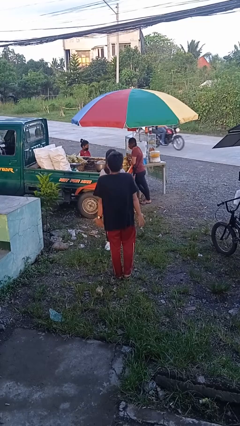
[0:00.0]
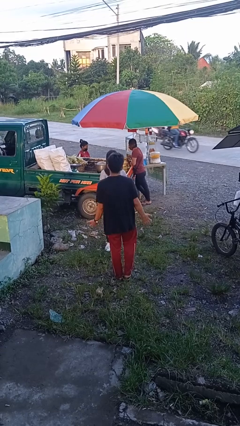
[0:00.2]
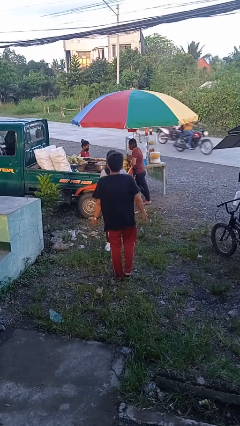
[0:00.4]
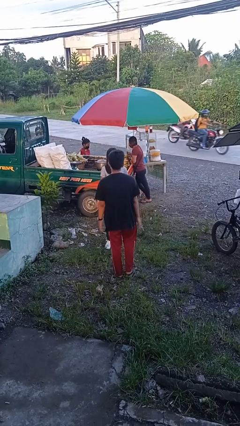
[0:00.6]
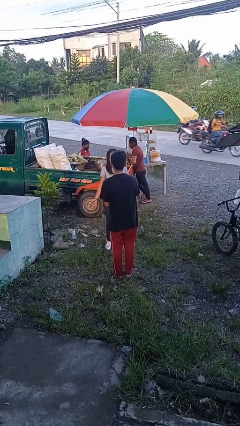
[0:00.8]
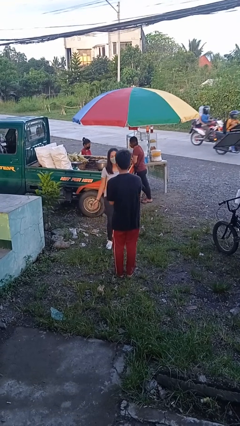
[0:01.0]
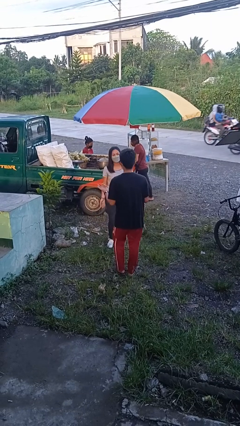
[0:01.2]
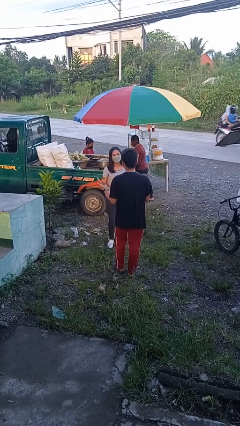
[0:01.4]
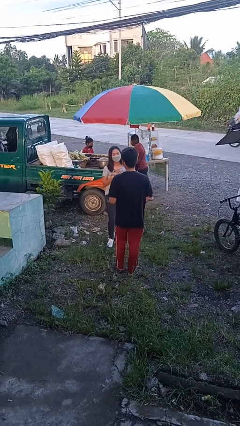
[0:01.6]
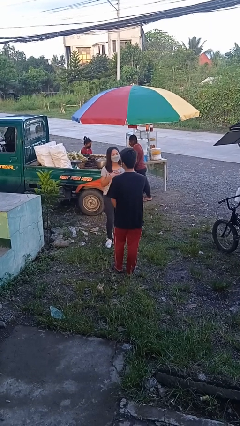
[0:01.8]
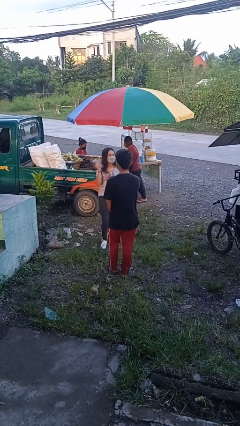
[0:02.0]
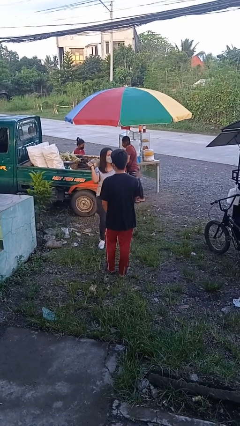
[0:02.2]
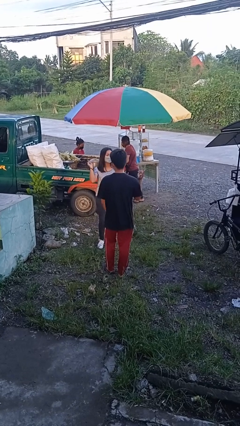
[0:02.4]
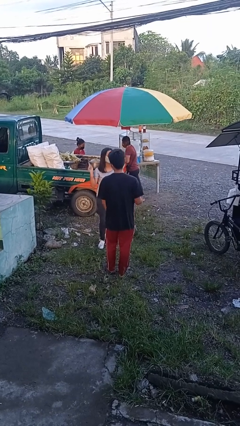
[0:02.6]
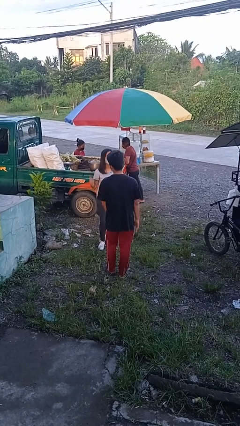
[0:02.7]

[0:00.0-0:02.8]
person talks to person

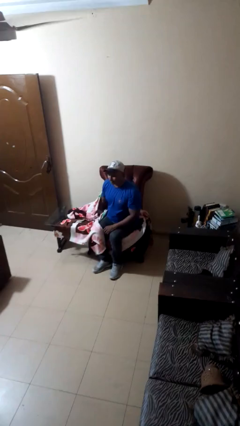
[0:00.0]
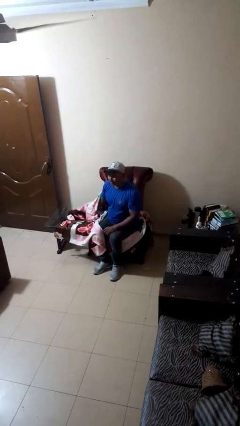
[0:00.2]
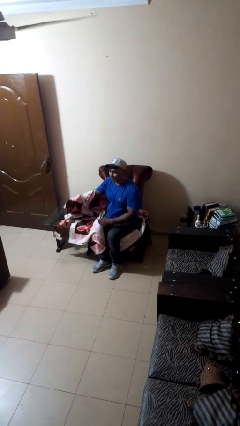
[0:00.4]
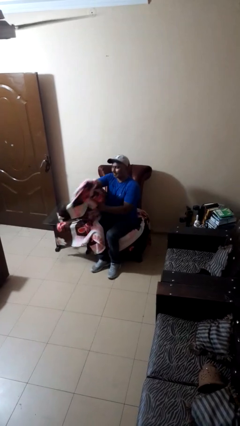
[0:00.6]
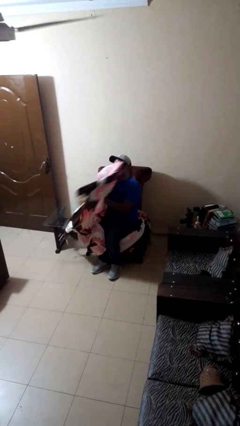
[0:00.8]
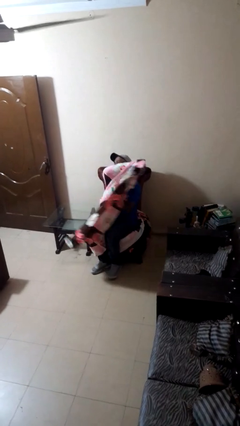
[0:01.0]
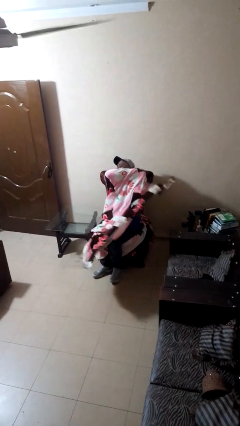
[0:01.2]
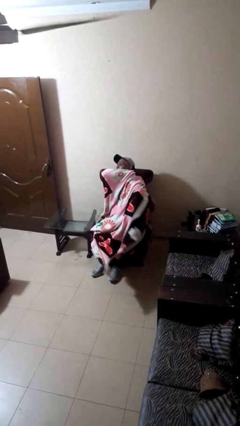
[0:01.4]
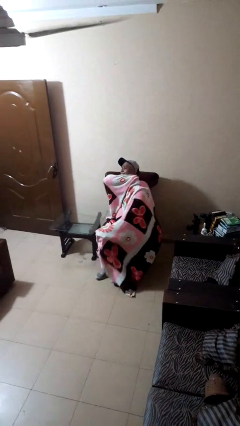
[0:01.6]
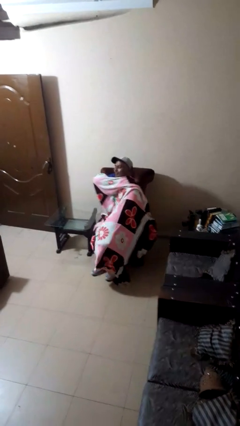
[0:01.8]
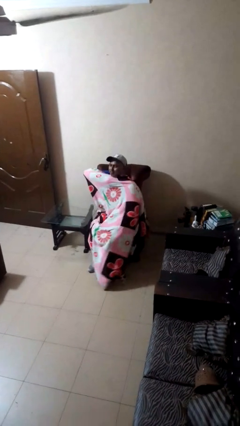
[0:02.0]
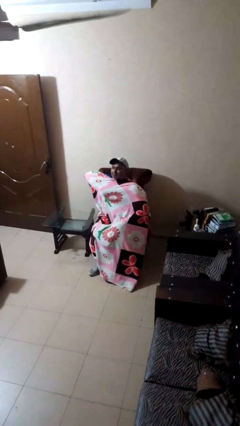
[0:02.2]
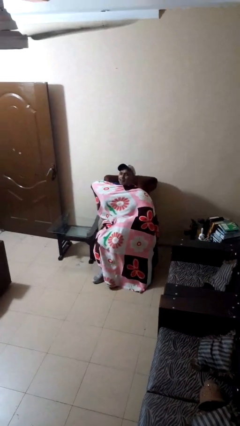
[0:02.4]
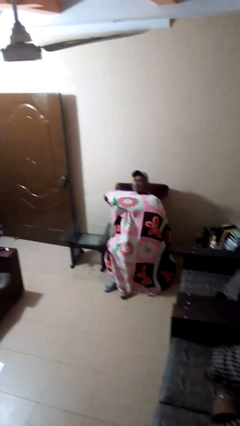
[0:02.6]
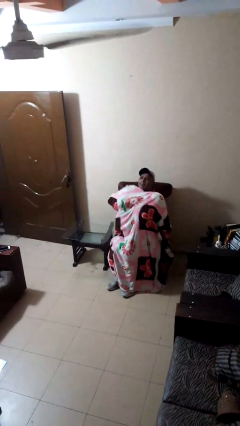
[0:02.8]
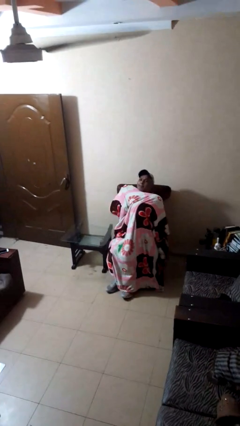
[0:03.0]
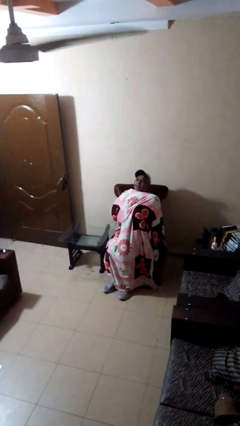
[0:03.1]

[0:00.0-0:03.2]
person covers with blanket

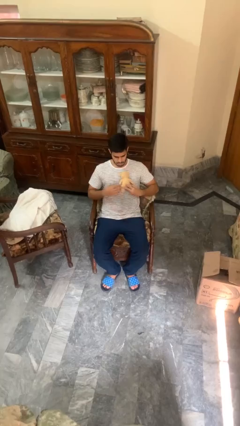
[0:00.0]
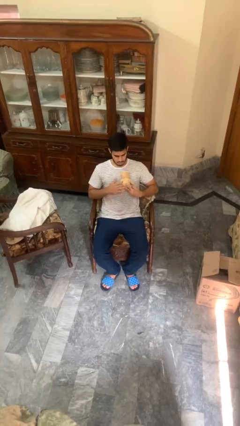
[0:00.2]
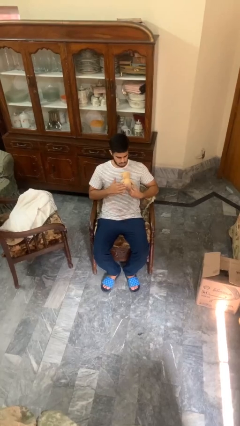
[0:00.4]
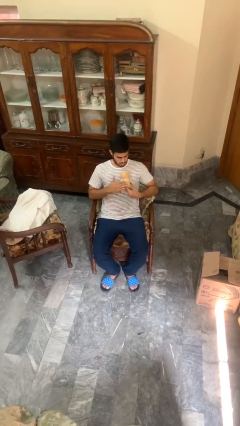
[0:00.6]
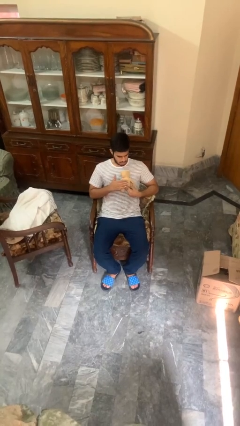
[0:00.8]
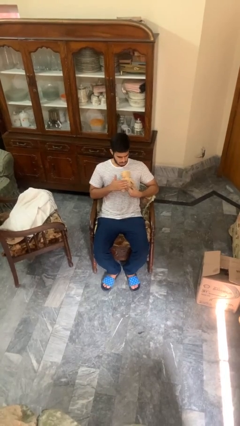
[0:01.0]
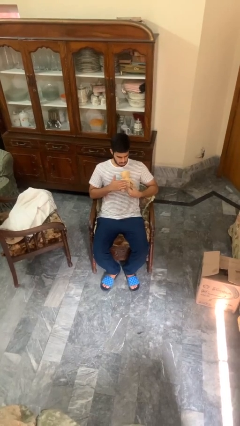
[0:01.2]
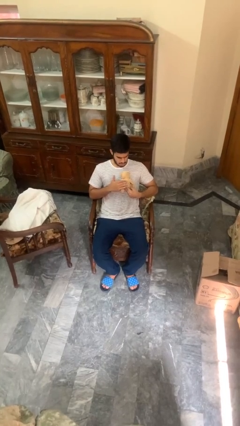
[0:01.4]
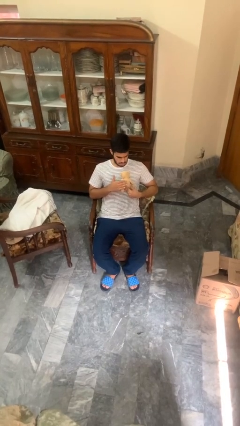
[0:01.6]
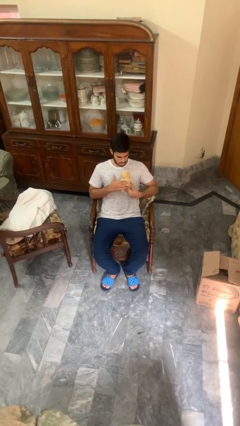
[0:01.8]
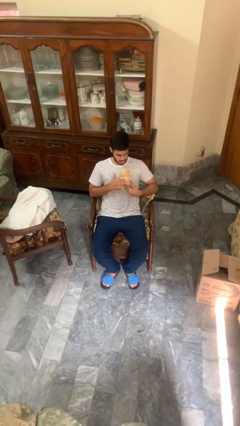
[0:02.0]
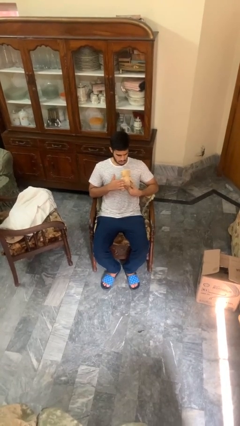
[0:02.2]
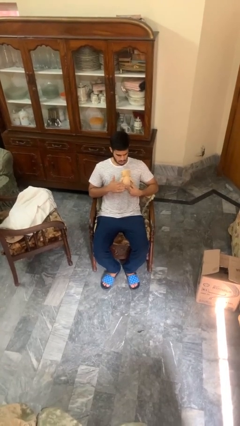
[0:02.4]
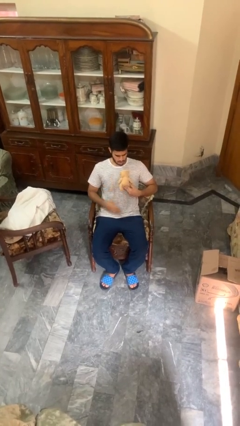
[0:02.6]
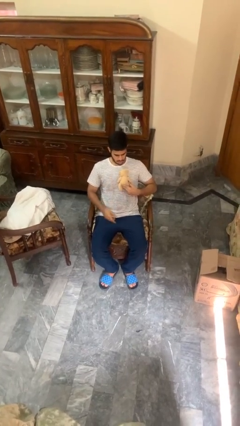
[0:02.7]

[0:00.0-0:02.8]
person hugs stuffed animal

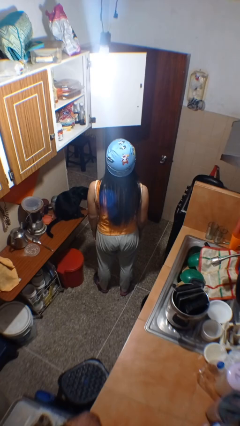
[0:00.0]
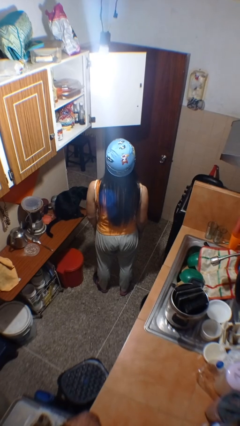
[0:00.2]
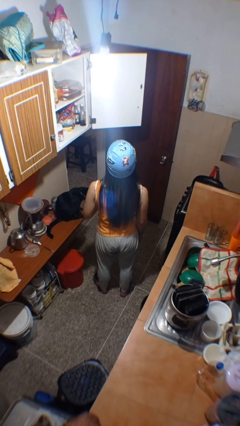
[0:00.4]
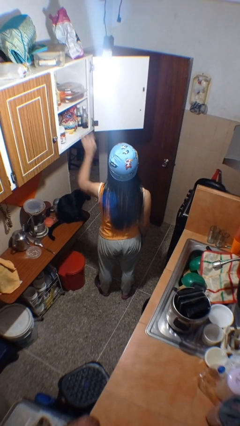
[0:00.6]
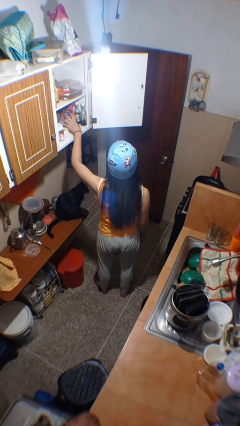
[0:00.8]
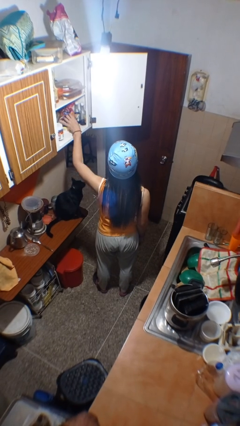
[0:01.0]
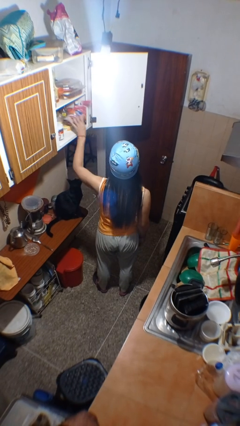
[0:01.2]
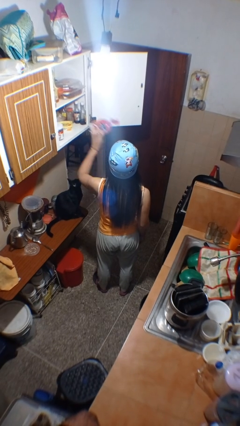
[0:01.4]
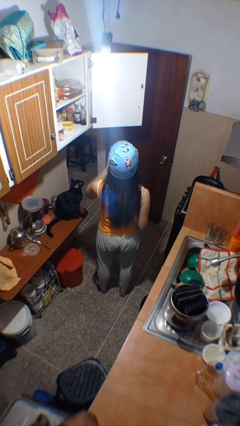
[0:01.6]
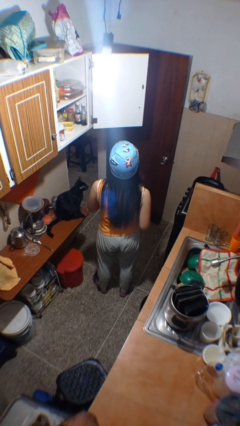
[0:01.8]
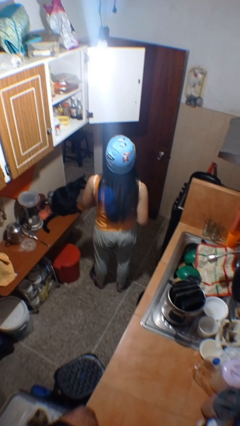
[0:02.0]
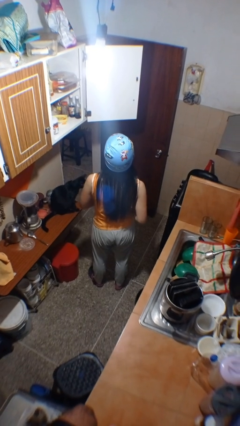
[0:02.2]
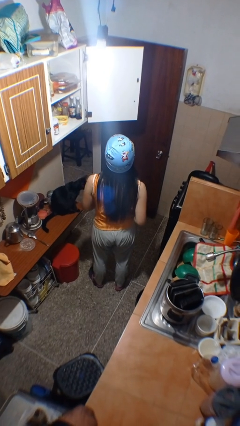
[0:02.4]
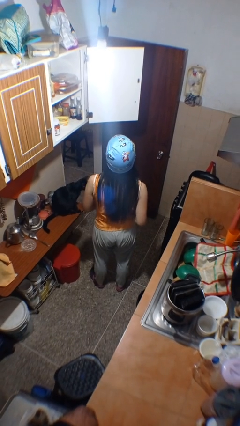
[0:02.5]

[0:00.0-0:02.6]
person picks up object from cabinet

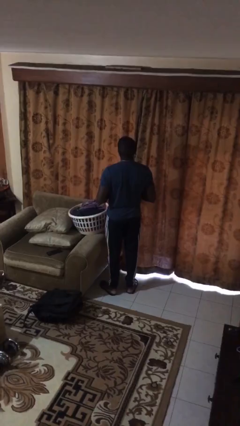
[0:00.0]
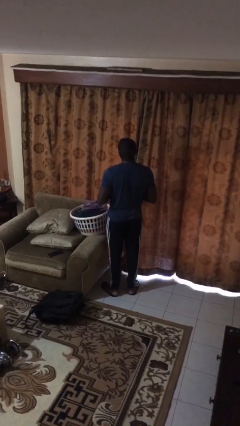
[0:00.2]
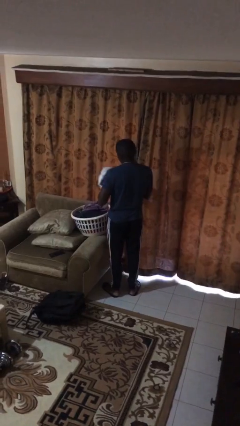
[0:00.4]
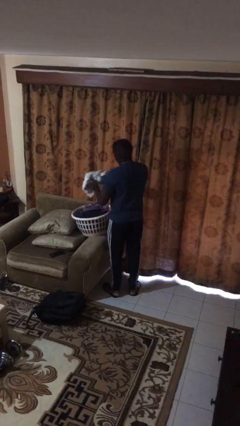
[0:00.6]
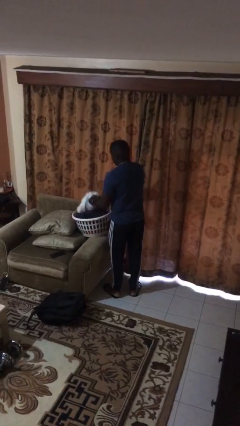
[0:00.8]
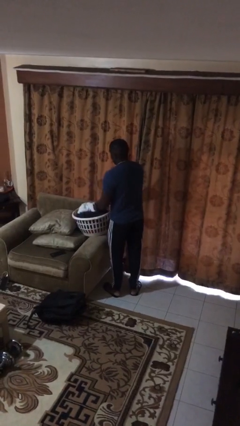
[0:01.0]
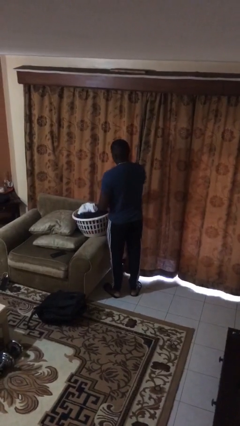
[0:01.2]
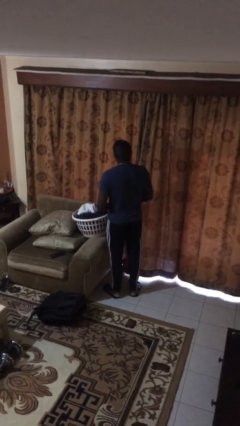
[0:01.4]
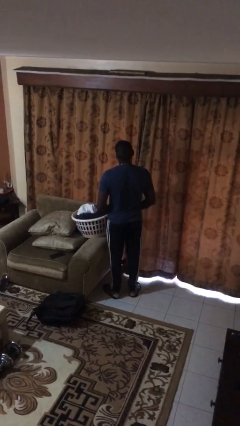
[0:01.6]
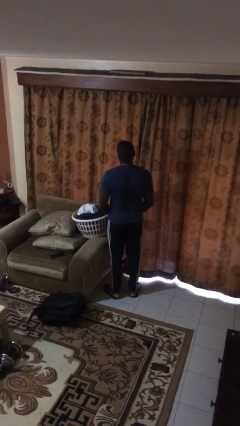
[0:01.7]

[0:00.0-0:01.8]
person puts object into basket

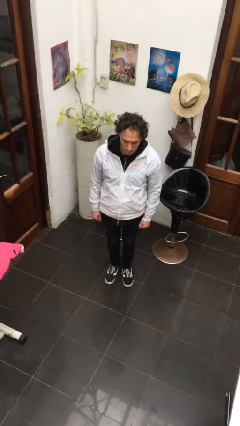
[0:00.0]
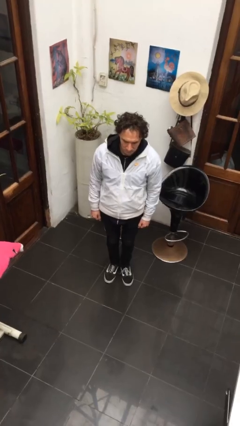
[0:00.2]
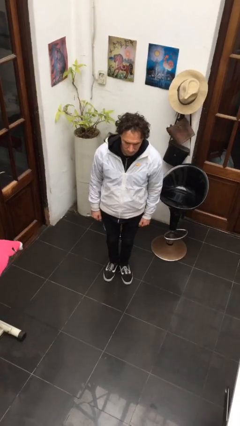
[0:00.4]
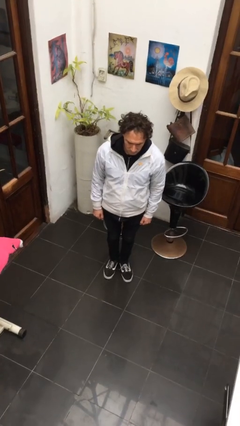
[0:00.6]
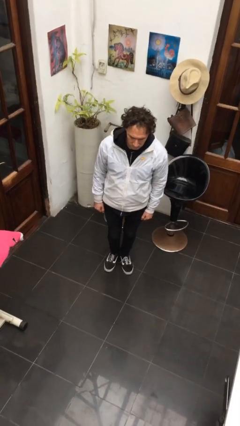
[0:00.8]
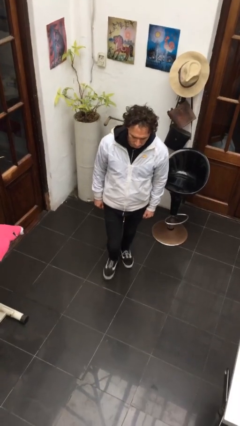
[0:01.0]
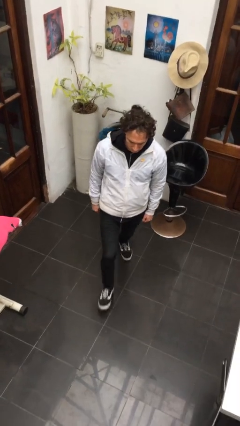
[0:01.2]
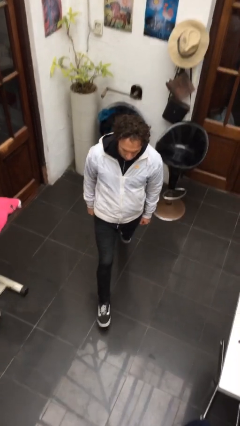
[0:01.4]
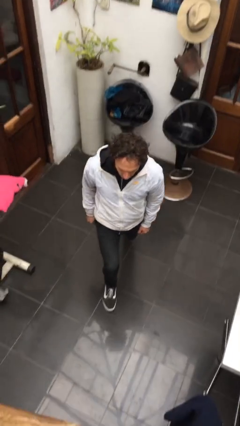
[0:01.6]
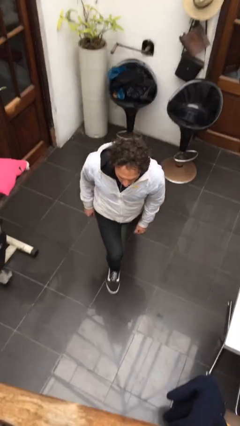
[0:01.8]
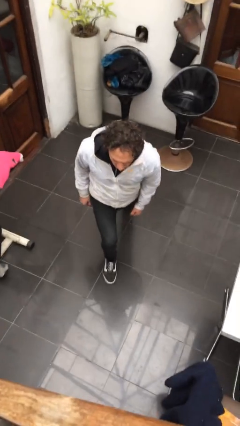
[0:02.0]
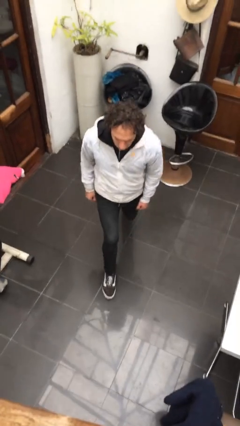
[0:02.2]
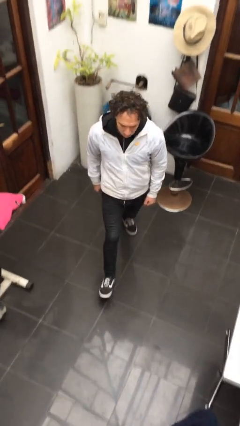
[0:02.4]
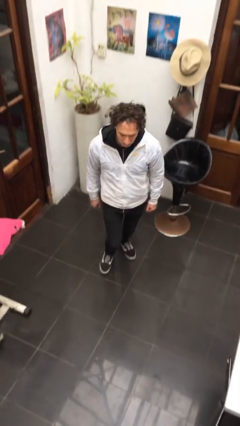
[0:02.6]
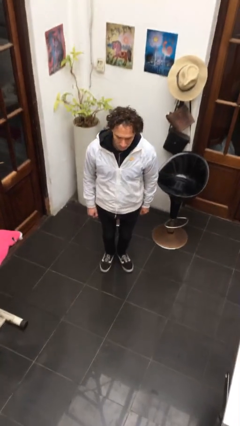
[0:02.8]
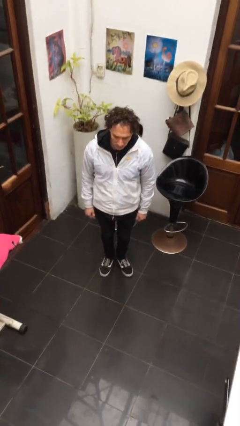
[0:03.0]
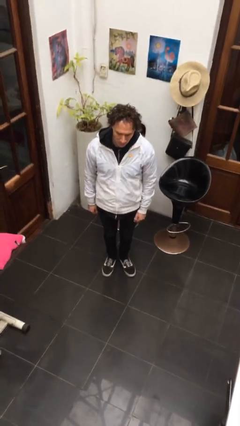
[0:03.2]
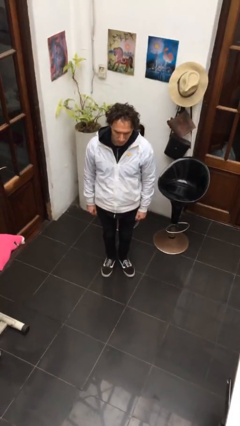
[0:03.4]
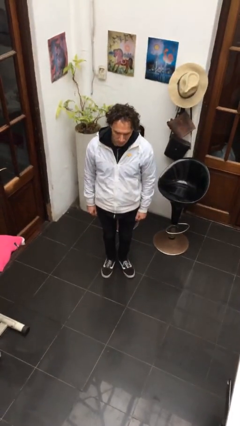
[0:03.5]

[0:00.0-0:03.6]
person exercises with lunges

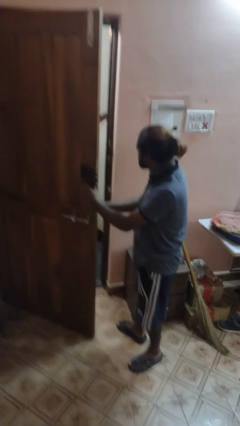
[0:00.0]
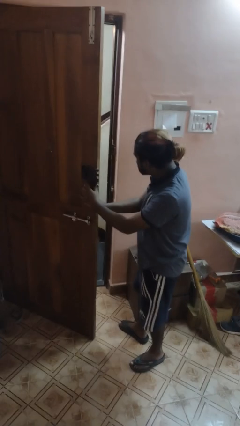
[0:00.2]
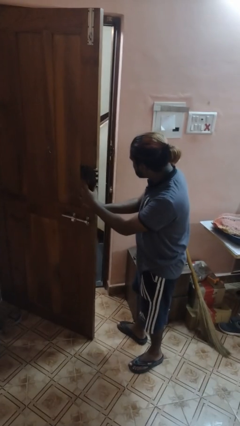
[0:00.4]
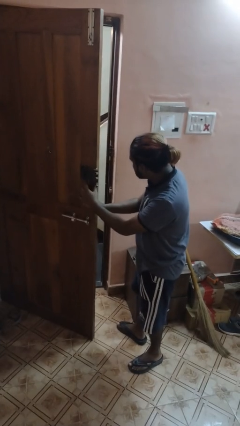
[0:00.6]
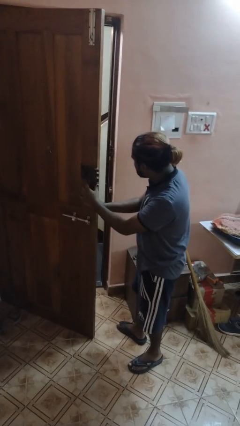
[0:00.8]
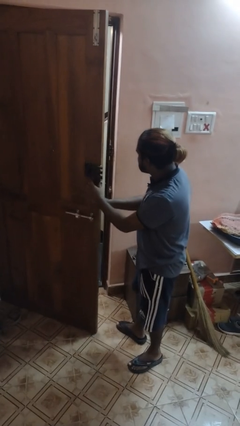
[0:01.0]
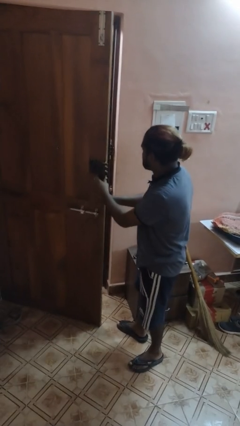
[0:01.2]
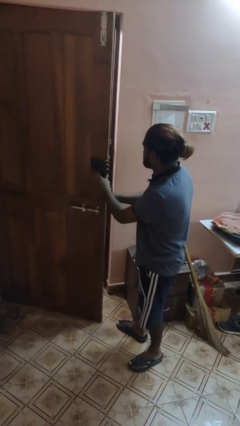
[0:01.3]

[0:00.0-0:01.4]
person opens facility door
